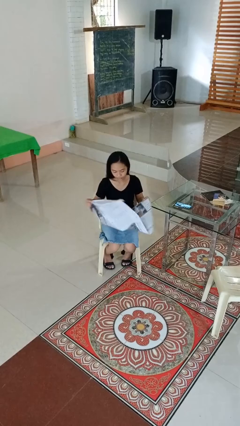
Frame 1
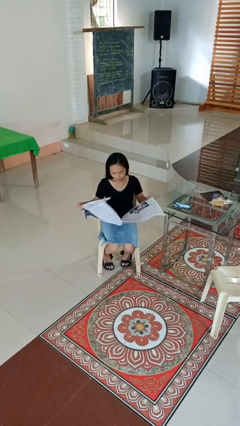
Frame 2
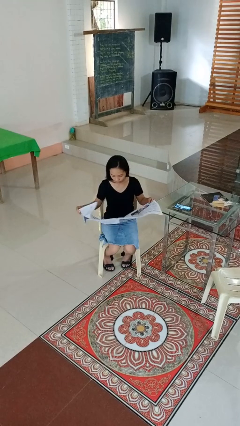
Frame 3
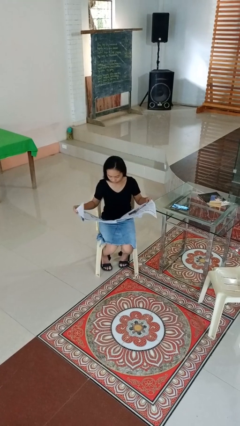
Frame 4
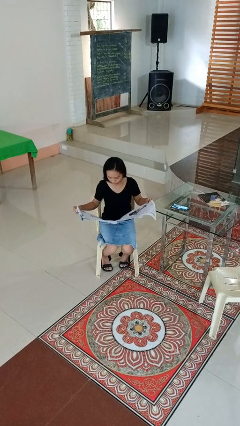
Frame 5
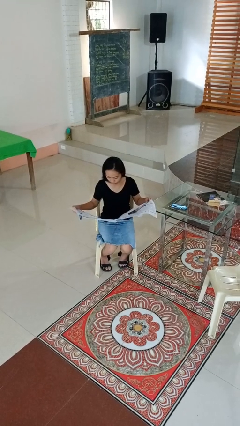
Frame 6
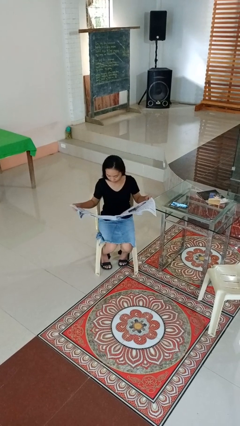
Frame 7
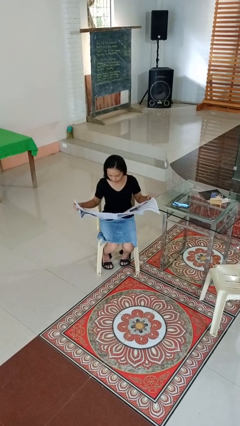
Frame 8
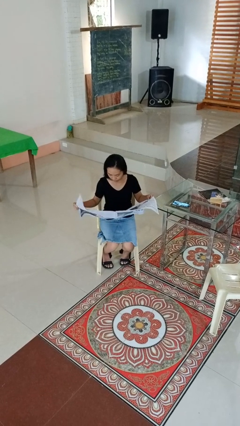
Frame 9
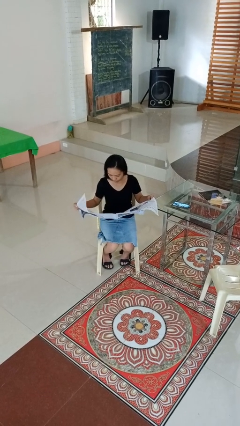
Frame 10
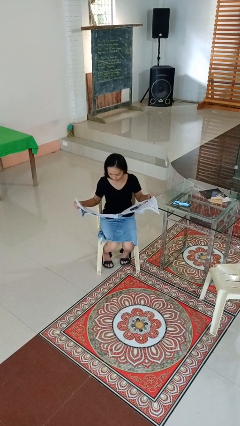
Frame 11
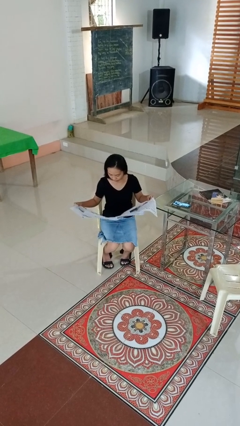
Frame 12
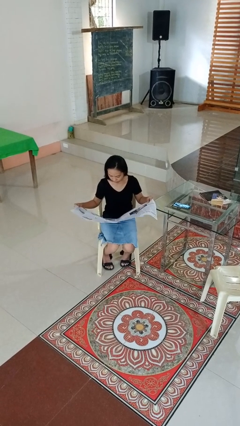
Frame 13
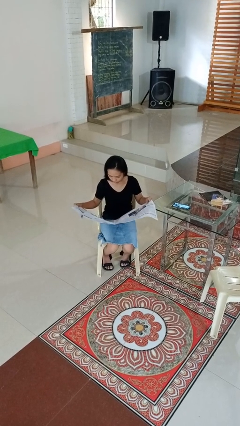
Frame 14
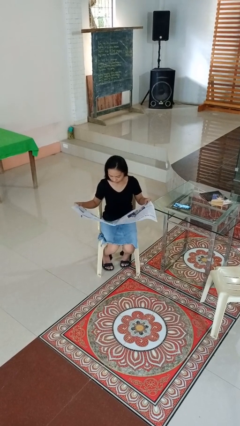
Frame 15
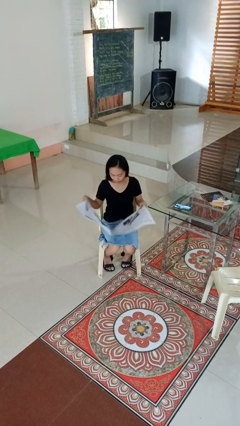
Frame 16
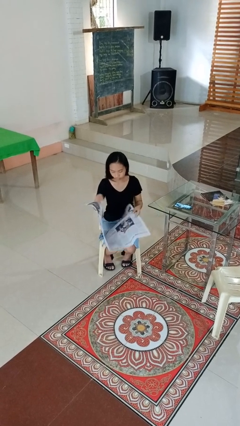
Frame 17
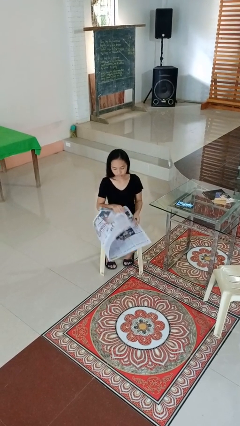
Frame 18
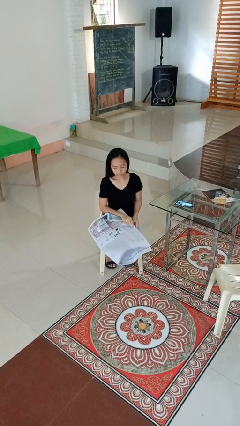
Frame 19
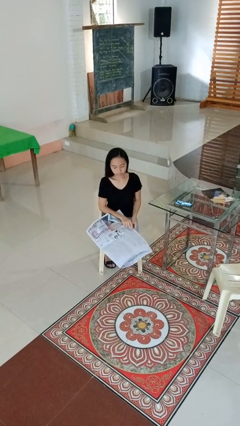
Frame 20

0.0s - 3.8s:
person reads newspaper

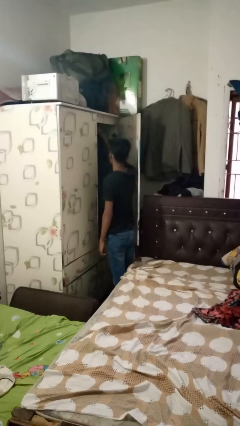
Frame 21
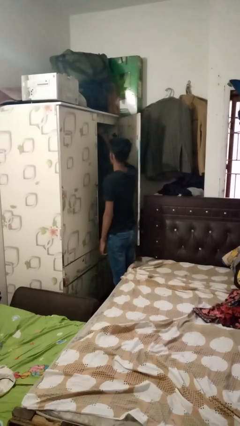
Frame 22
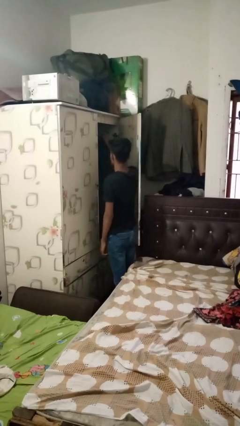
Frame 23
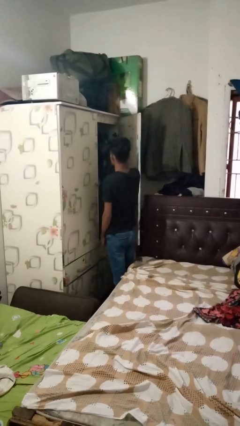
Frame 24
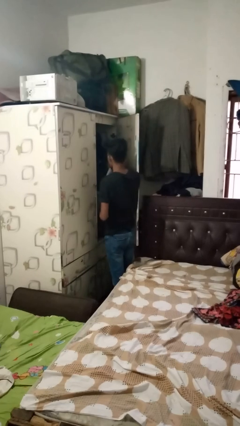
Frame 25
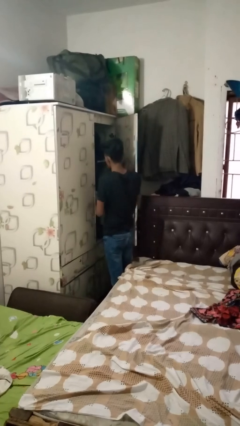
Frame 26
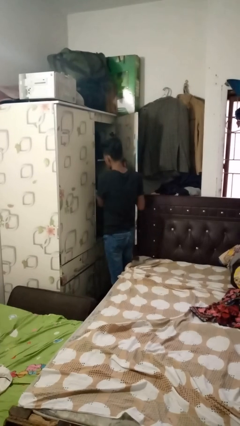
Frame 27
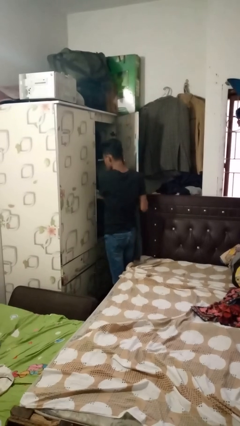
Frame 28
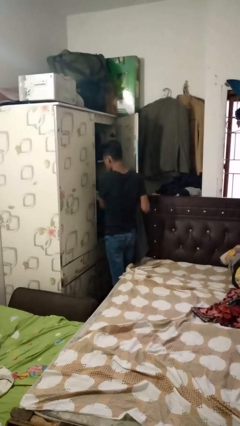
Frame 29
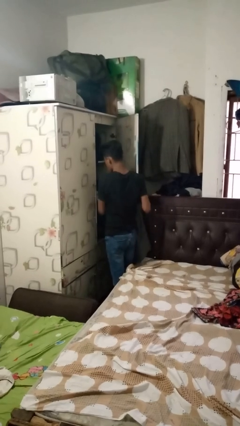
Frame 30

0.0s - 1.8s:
person takes clothes from closet

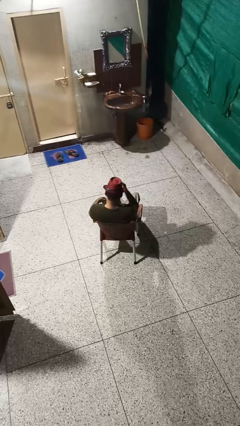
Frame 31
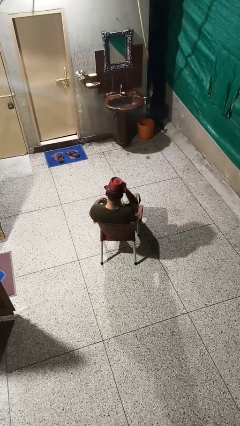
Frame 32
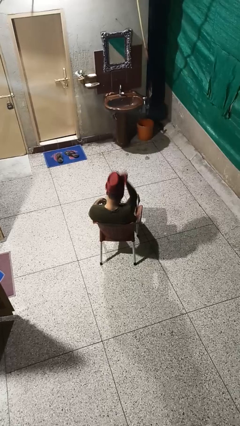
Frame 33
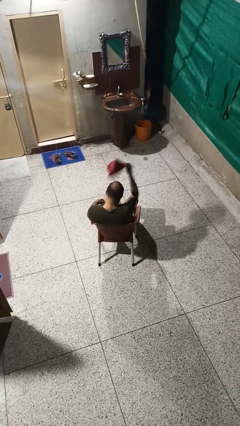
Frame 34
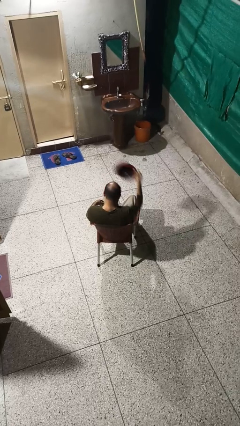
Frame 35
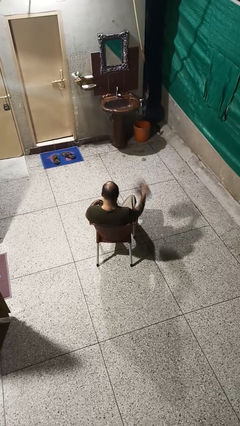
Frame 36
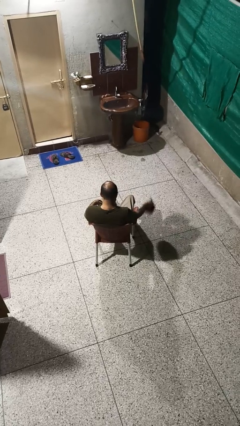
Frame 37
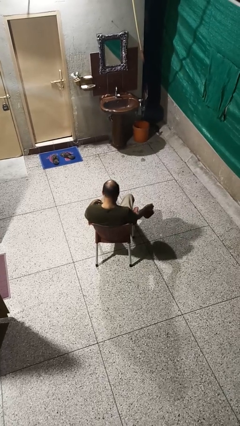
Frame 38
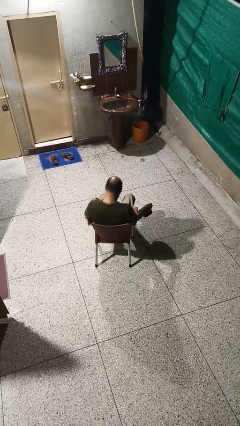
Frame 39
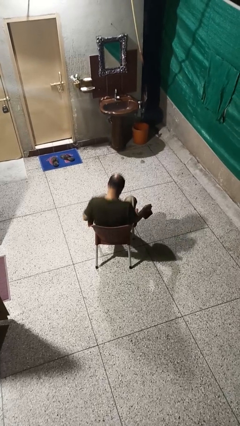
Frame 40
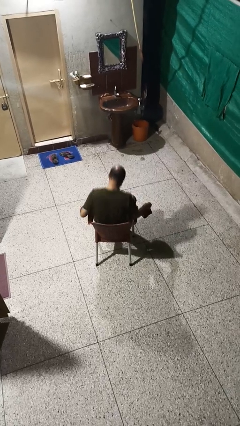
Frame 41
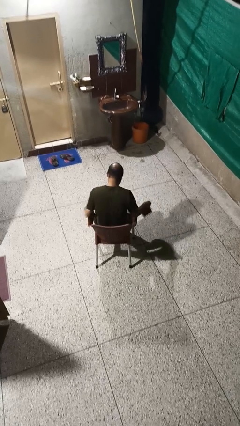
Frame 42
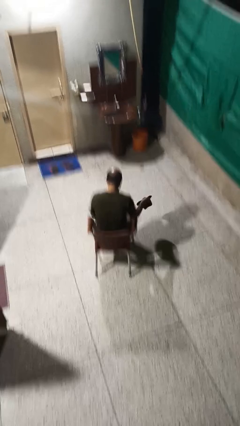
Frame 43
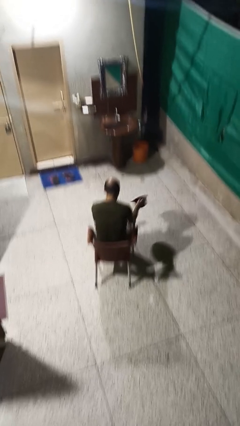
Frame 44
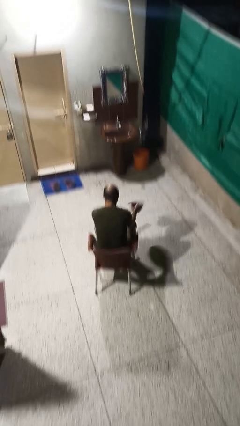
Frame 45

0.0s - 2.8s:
person takes off hat

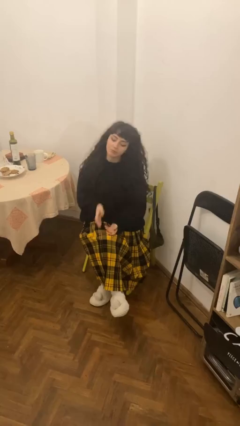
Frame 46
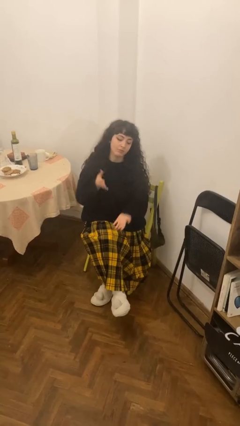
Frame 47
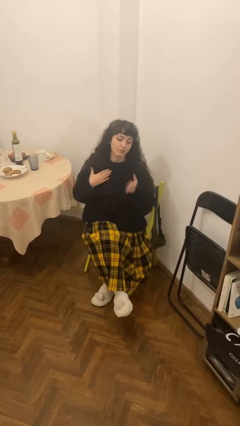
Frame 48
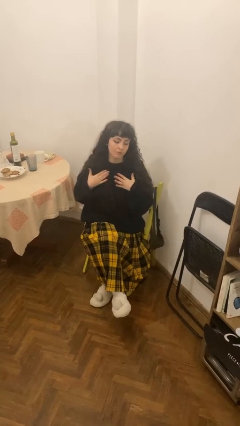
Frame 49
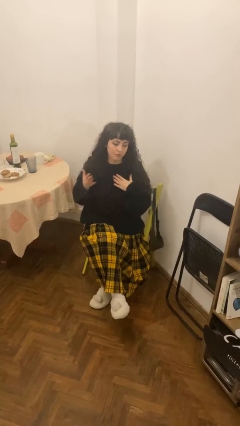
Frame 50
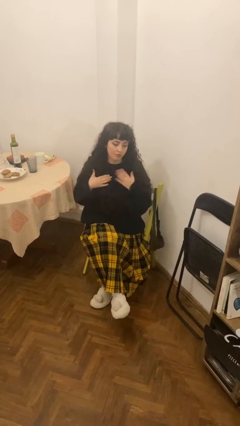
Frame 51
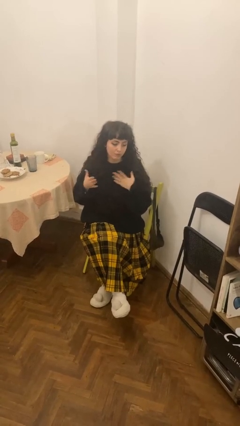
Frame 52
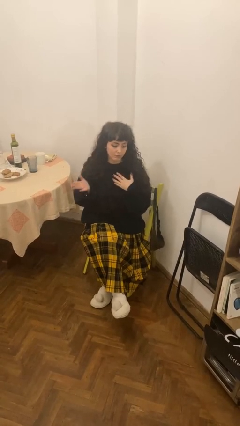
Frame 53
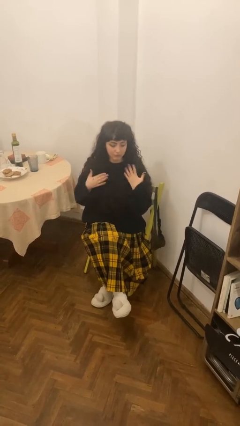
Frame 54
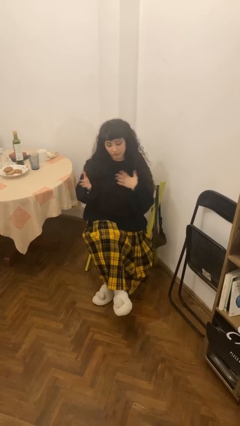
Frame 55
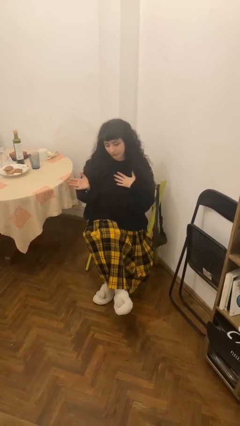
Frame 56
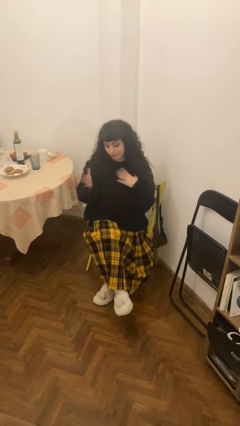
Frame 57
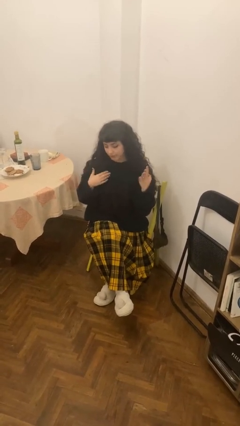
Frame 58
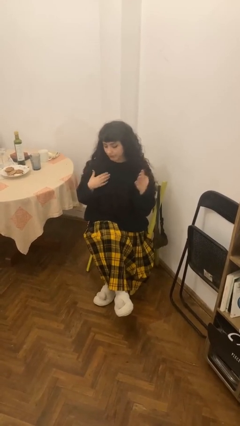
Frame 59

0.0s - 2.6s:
person drums on chest

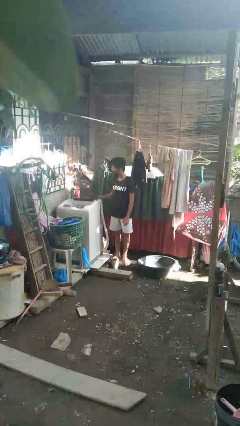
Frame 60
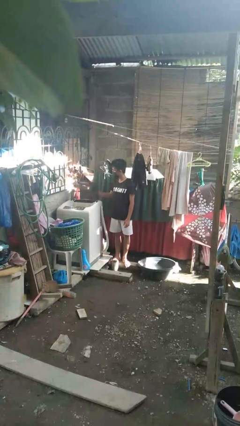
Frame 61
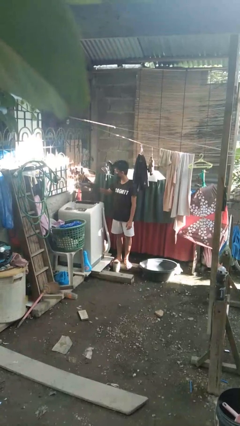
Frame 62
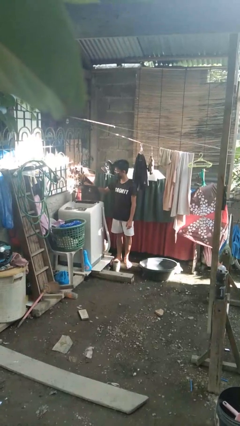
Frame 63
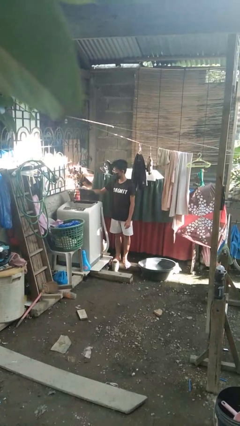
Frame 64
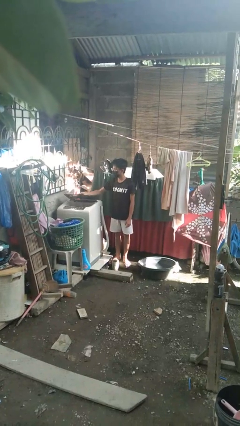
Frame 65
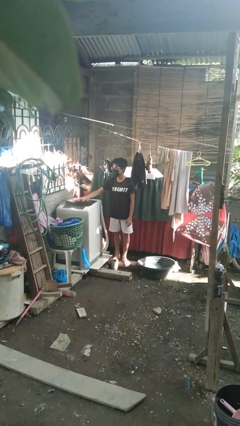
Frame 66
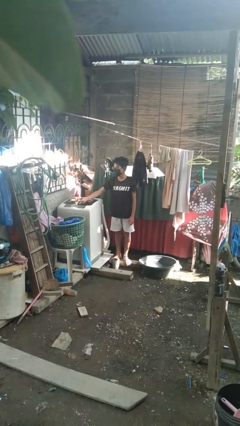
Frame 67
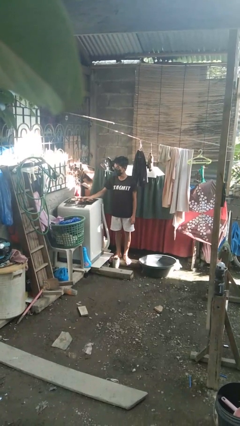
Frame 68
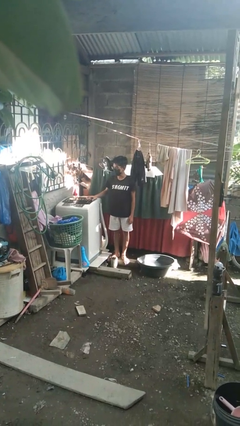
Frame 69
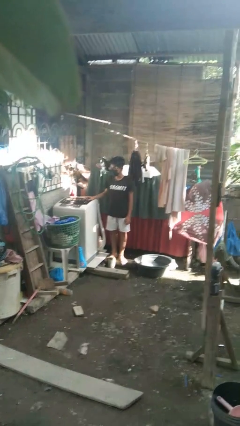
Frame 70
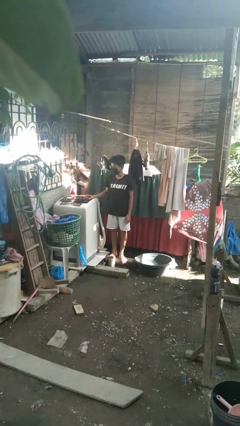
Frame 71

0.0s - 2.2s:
person closes clothes washer

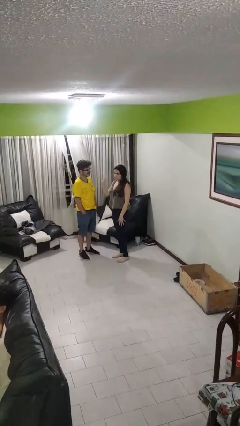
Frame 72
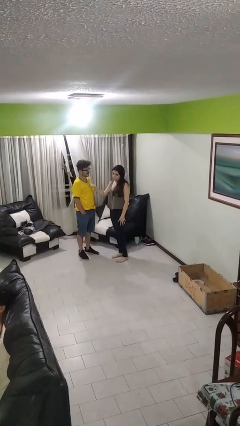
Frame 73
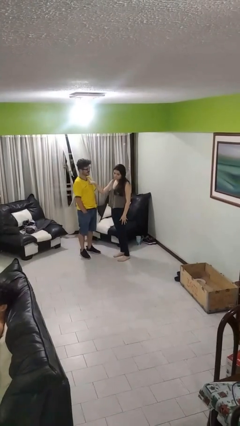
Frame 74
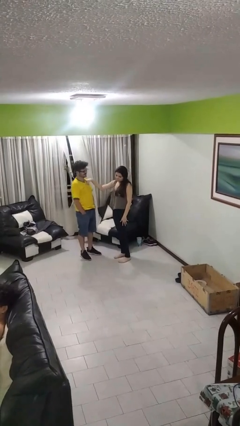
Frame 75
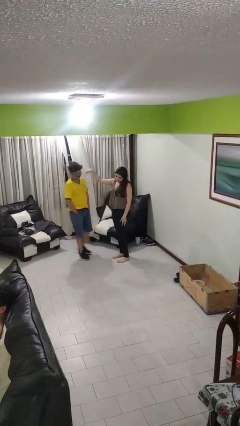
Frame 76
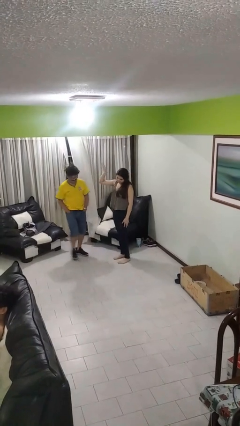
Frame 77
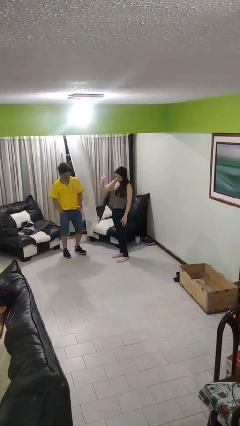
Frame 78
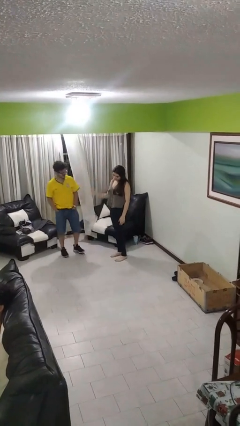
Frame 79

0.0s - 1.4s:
person shoves person

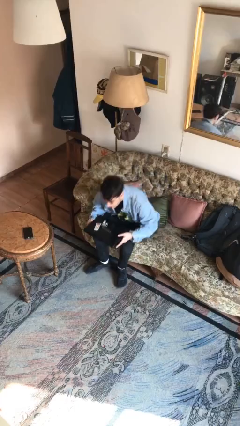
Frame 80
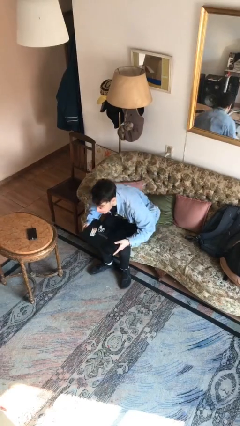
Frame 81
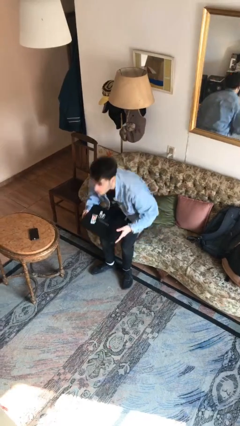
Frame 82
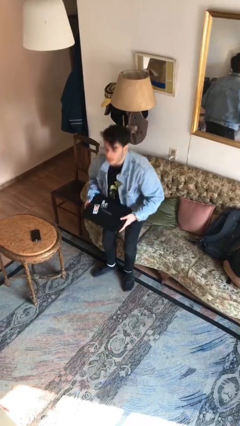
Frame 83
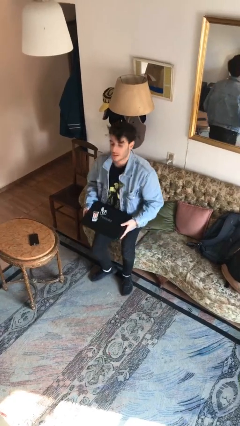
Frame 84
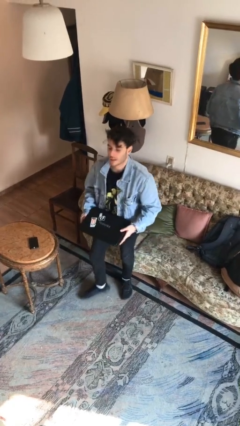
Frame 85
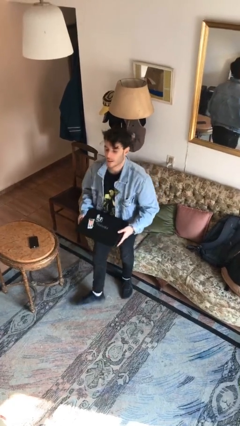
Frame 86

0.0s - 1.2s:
person stands up

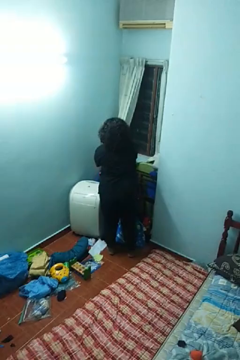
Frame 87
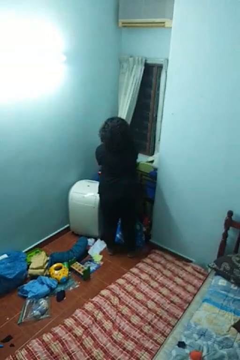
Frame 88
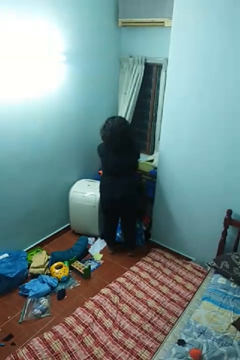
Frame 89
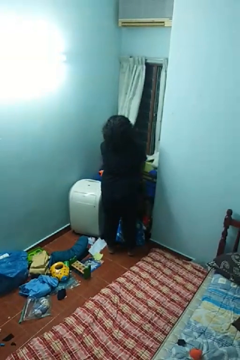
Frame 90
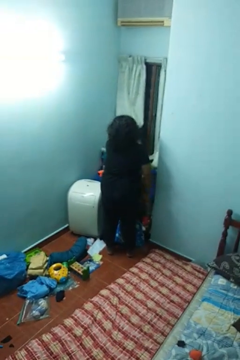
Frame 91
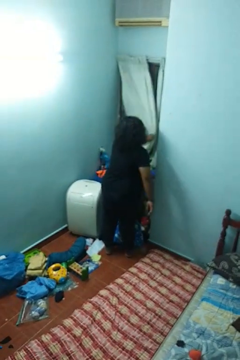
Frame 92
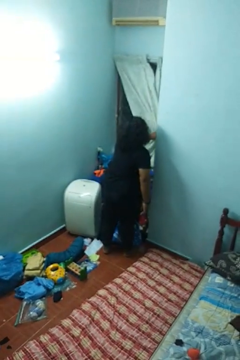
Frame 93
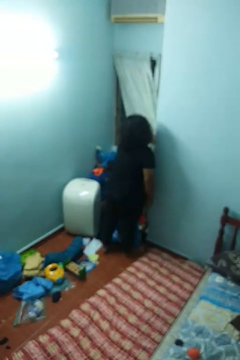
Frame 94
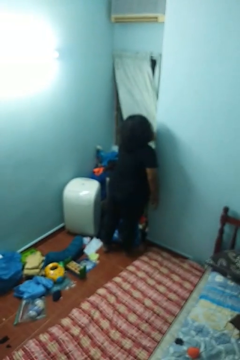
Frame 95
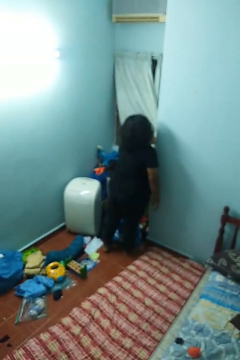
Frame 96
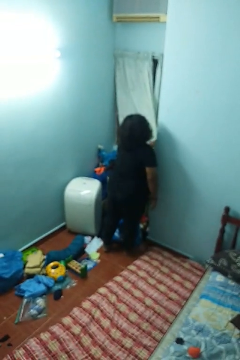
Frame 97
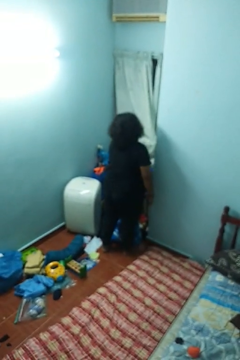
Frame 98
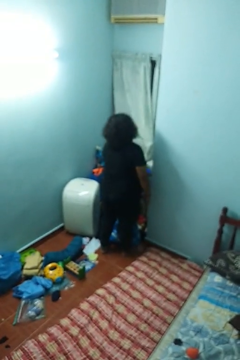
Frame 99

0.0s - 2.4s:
person closes curtains
